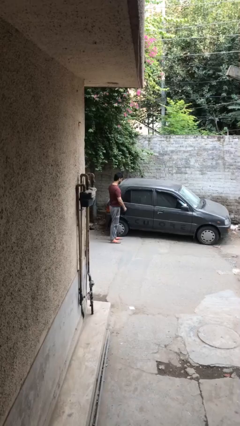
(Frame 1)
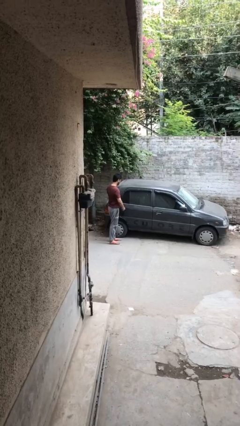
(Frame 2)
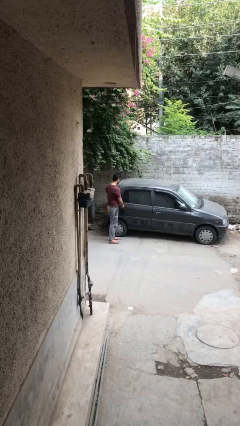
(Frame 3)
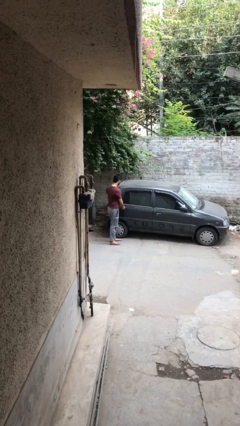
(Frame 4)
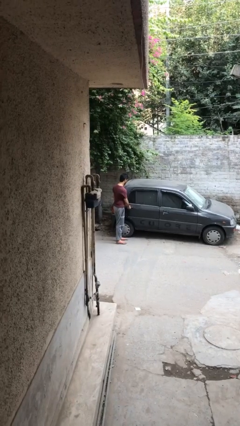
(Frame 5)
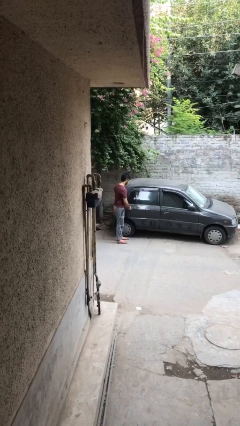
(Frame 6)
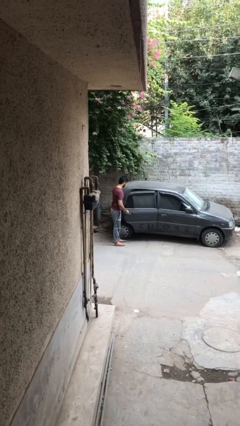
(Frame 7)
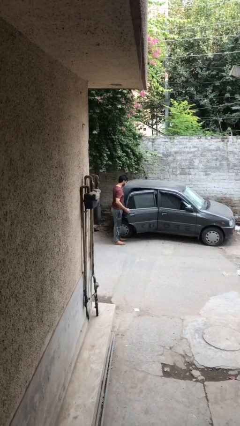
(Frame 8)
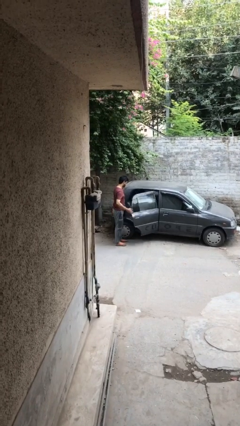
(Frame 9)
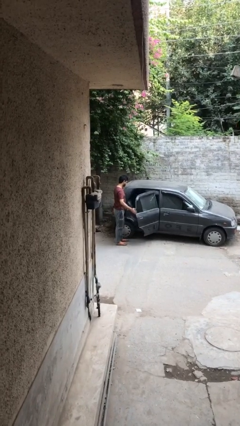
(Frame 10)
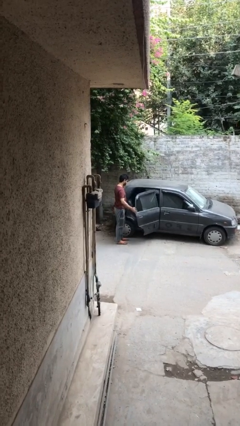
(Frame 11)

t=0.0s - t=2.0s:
person opens car door

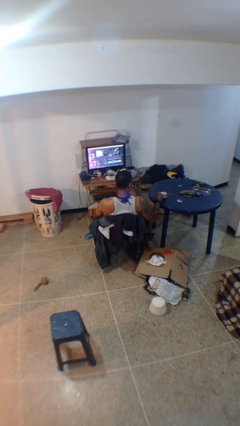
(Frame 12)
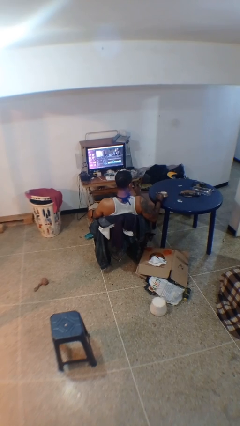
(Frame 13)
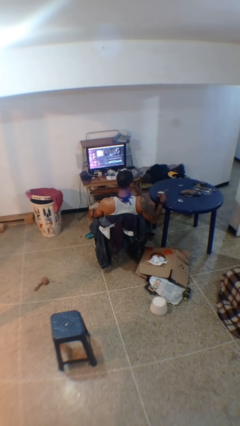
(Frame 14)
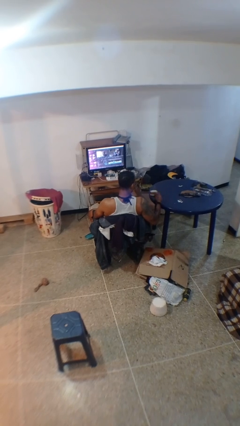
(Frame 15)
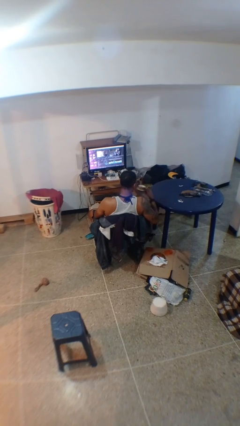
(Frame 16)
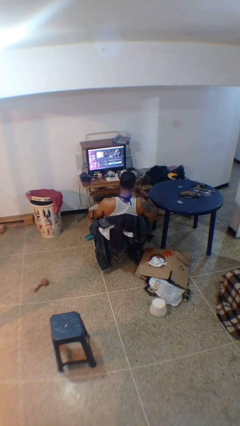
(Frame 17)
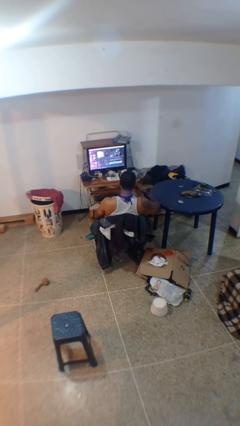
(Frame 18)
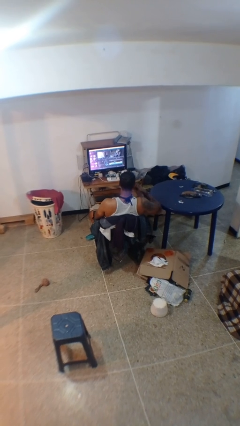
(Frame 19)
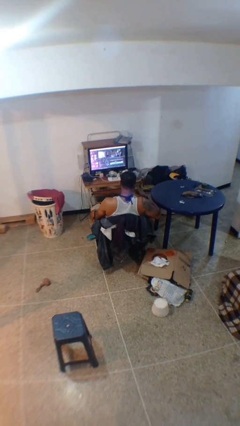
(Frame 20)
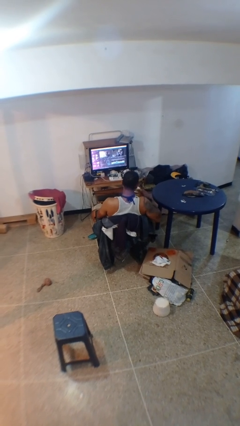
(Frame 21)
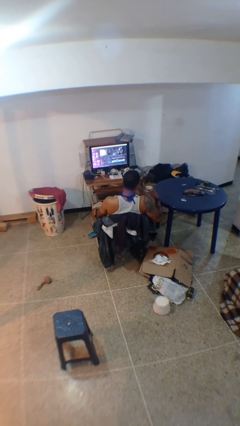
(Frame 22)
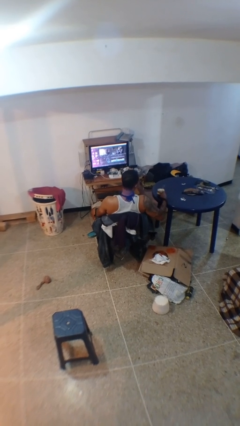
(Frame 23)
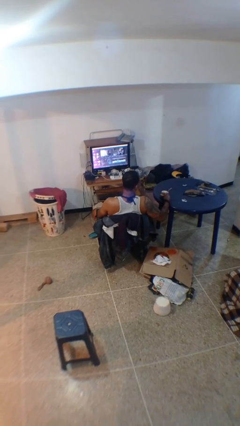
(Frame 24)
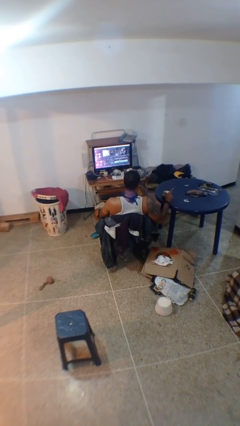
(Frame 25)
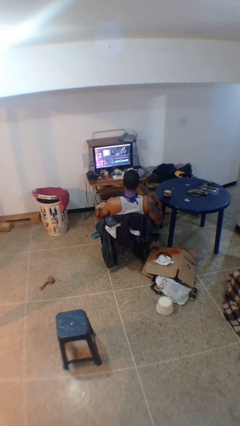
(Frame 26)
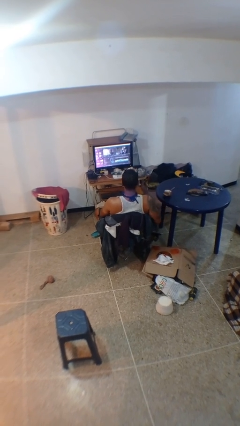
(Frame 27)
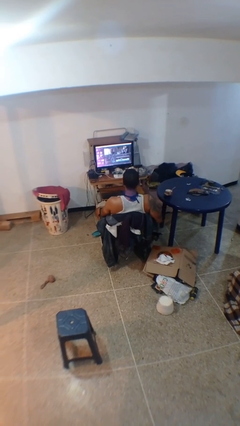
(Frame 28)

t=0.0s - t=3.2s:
person drinks from mug

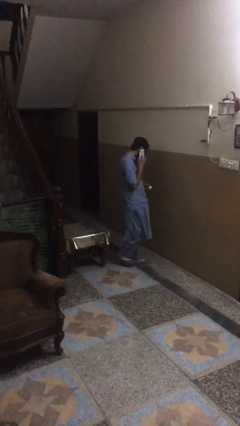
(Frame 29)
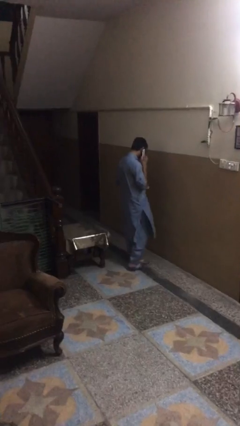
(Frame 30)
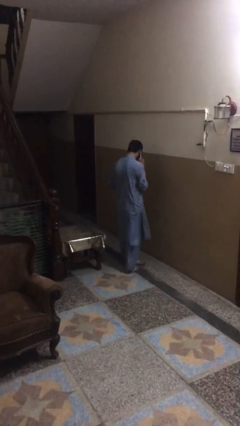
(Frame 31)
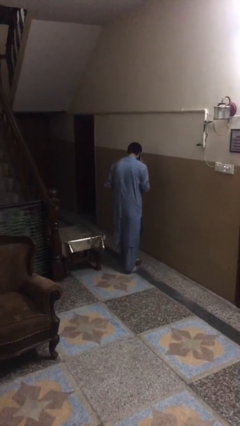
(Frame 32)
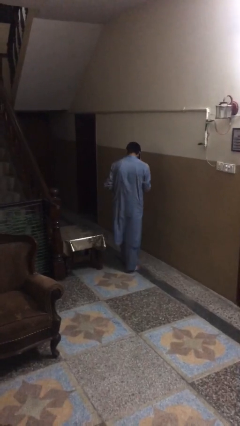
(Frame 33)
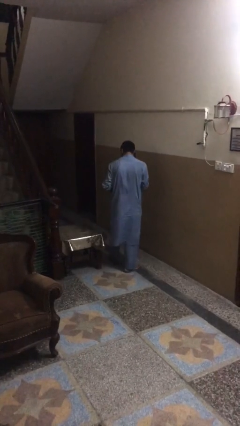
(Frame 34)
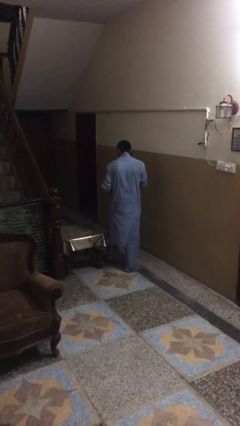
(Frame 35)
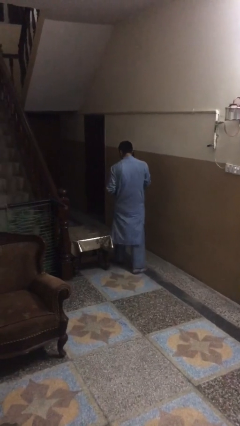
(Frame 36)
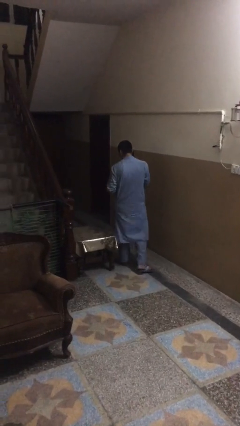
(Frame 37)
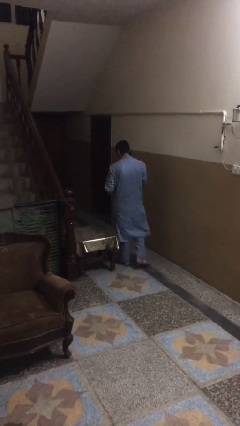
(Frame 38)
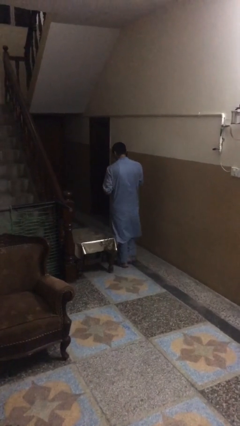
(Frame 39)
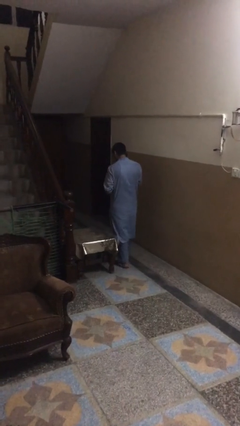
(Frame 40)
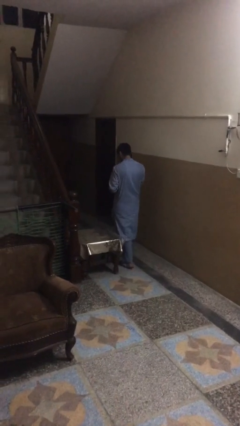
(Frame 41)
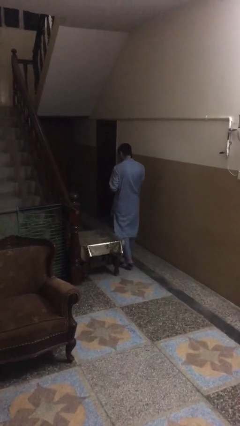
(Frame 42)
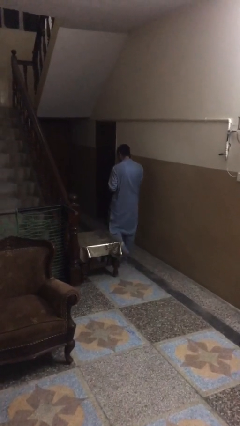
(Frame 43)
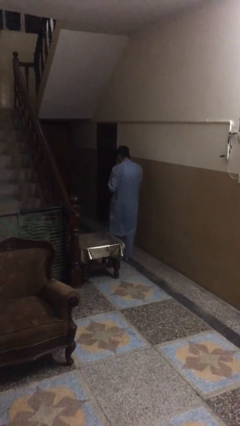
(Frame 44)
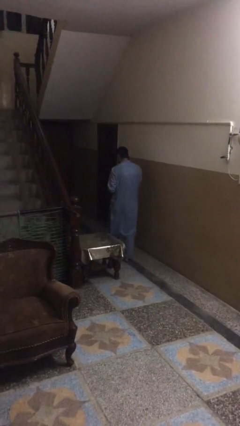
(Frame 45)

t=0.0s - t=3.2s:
person talks on phone

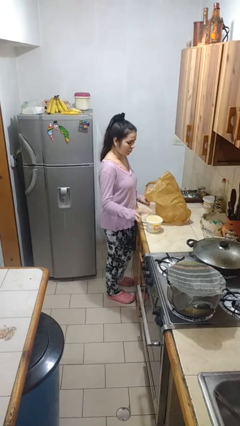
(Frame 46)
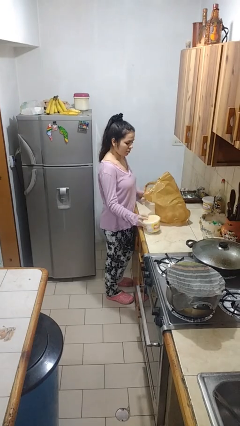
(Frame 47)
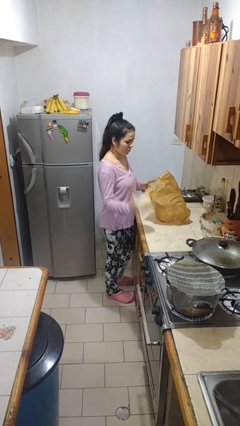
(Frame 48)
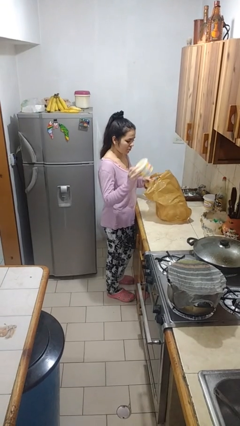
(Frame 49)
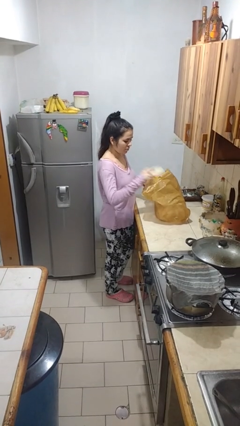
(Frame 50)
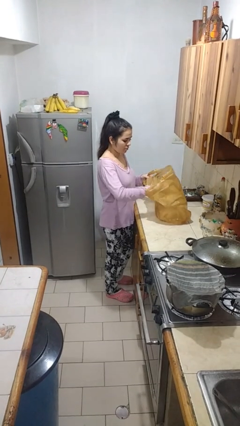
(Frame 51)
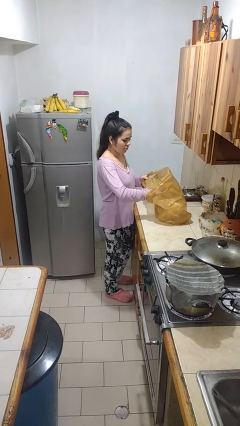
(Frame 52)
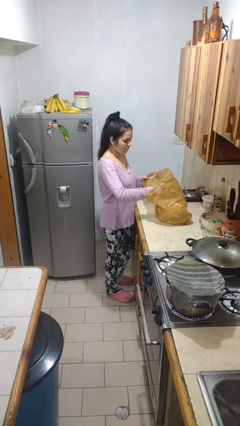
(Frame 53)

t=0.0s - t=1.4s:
person puts object into bag

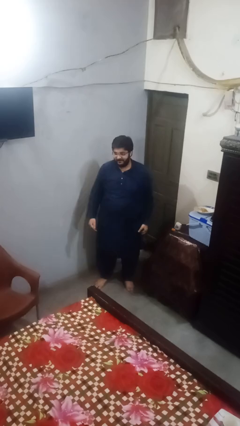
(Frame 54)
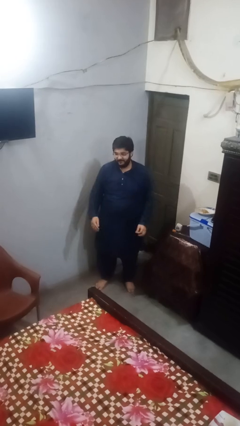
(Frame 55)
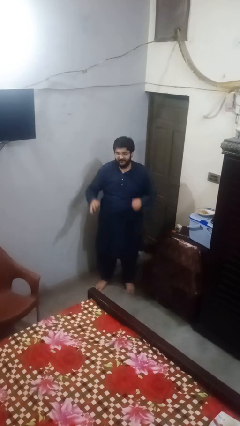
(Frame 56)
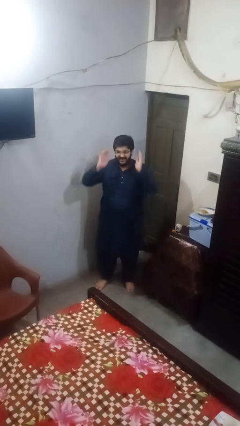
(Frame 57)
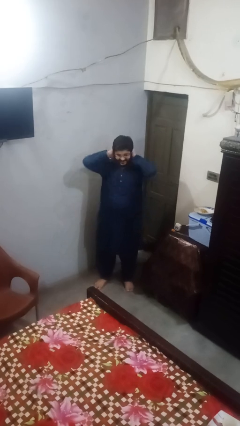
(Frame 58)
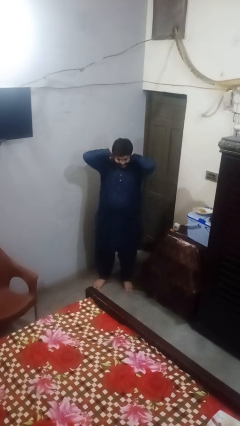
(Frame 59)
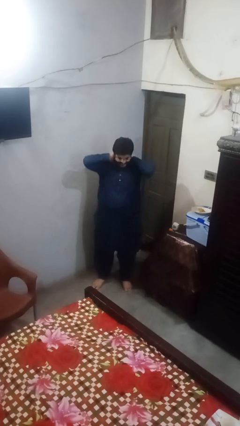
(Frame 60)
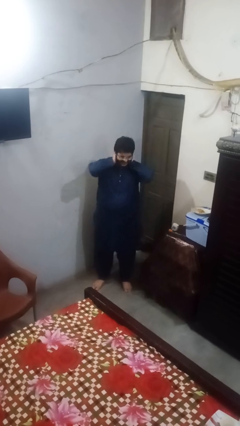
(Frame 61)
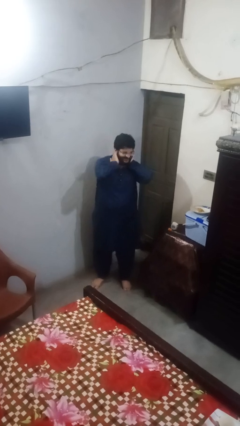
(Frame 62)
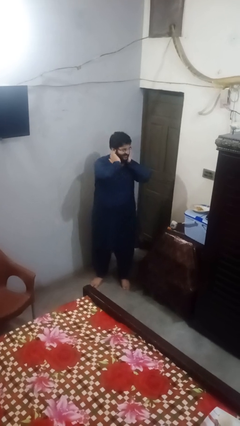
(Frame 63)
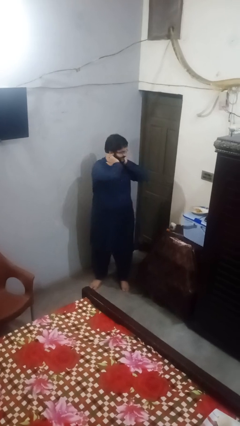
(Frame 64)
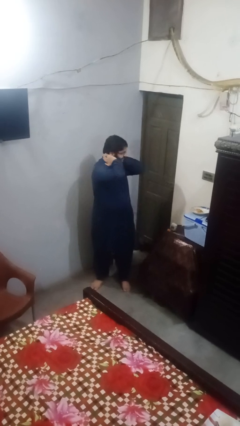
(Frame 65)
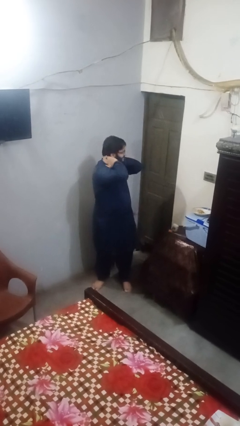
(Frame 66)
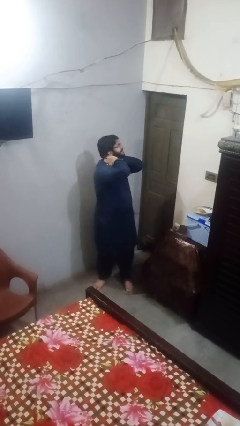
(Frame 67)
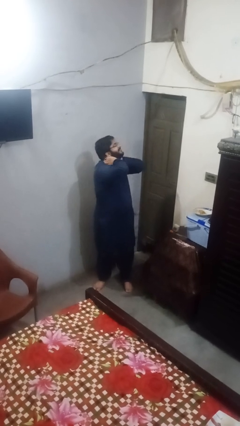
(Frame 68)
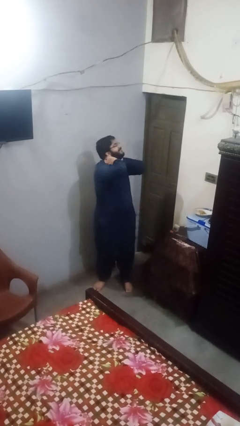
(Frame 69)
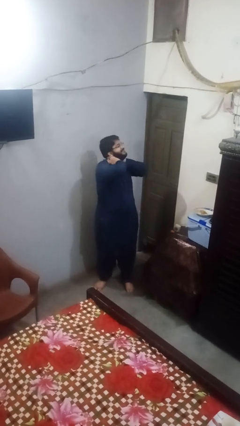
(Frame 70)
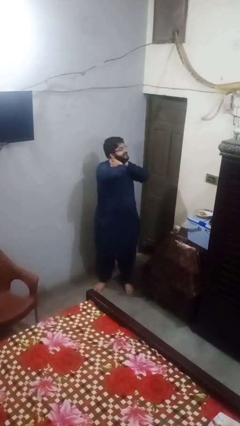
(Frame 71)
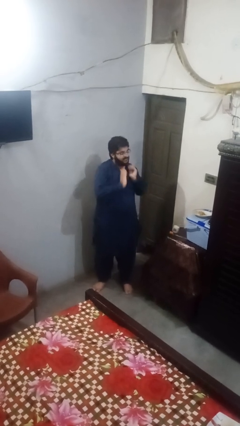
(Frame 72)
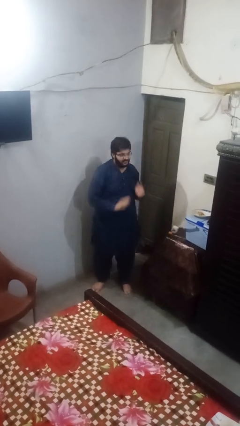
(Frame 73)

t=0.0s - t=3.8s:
person rubs neck

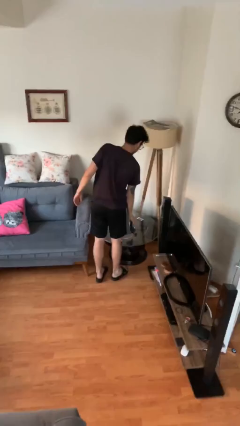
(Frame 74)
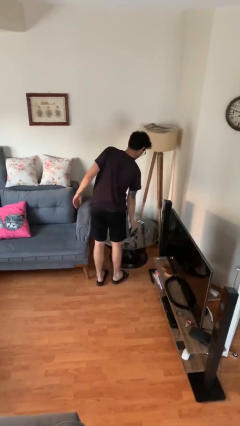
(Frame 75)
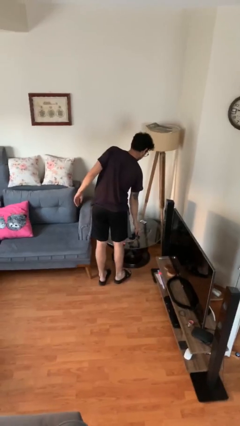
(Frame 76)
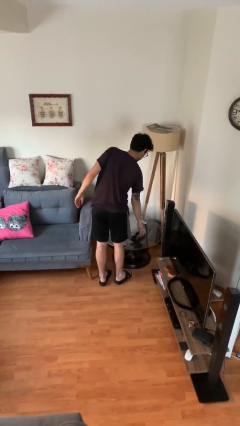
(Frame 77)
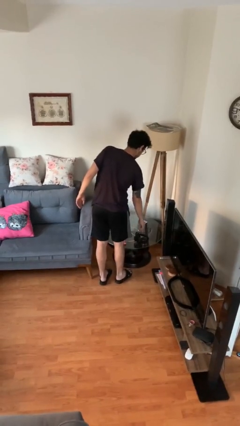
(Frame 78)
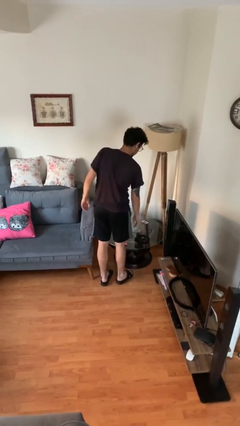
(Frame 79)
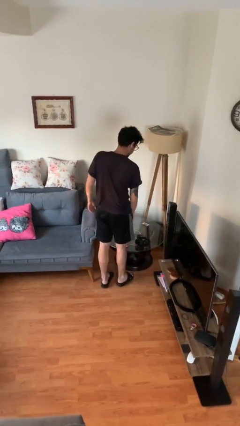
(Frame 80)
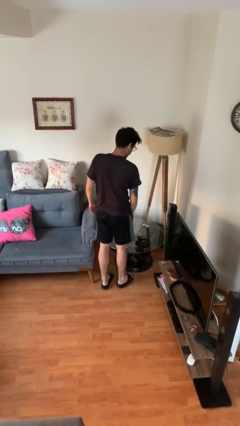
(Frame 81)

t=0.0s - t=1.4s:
person puts down object on table

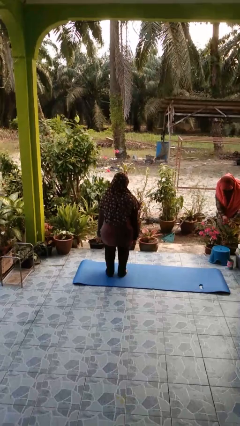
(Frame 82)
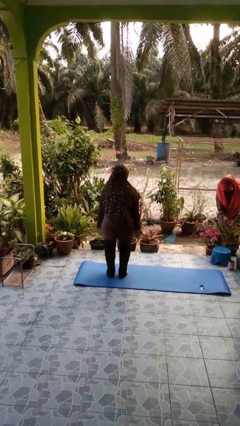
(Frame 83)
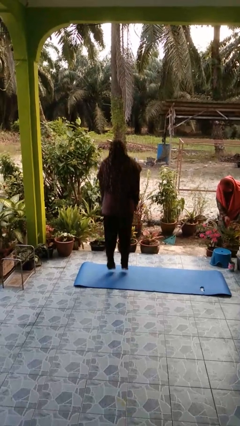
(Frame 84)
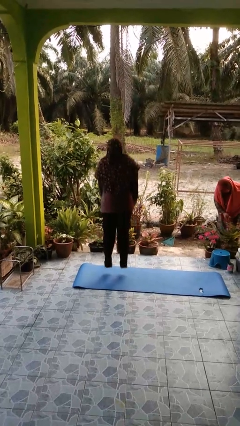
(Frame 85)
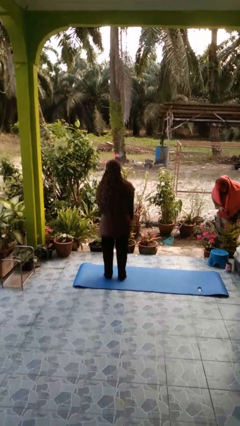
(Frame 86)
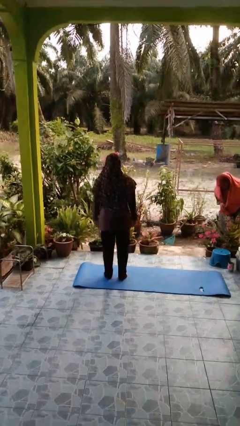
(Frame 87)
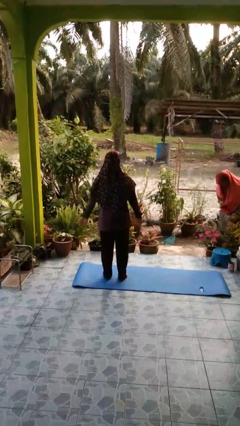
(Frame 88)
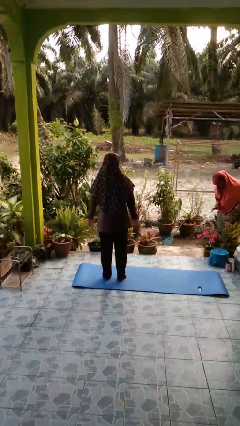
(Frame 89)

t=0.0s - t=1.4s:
person jumps

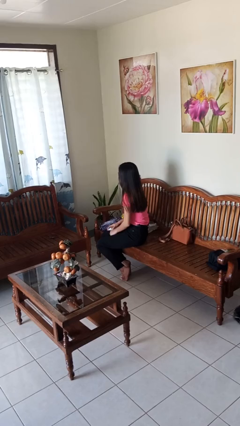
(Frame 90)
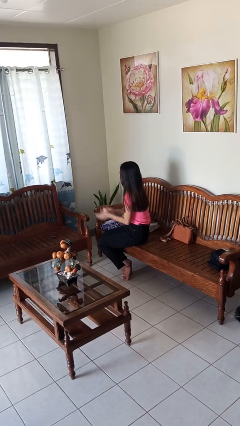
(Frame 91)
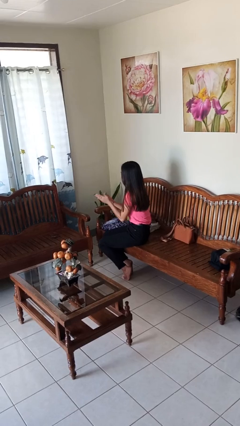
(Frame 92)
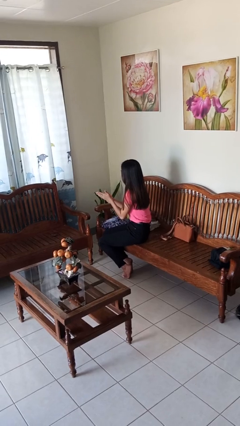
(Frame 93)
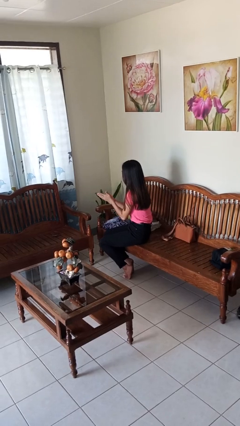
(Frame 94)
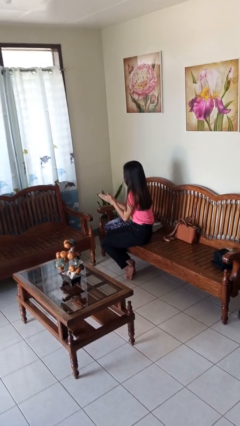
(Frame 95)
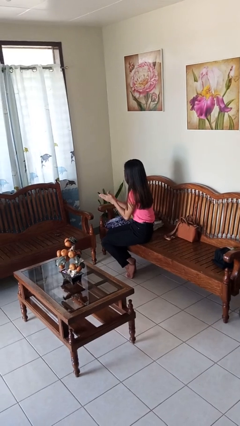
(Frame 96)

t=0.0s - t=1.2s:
person sprays from bottle
